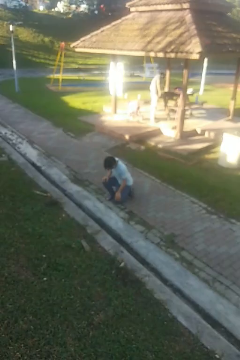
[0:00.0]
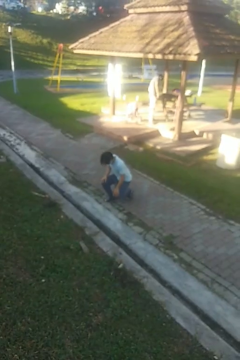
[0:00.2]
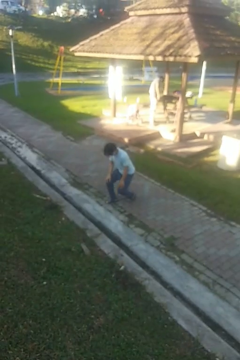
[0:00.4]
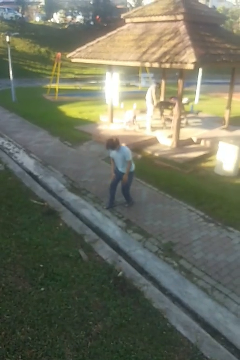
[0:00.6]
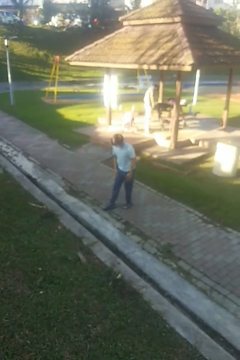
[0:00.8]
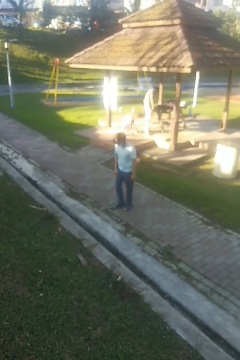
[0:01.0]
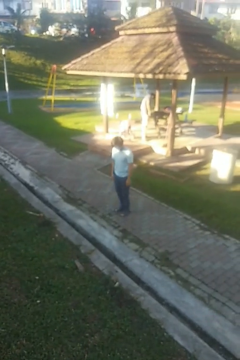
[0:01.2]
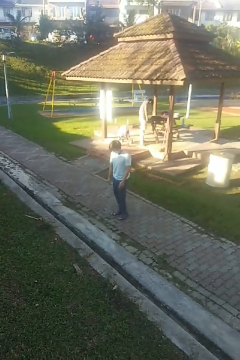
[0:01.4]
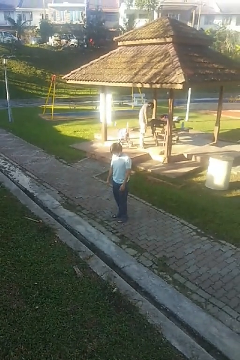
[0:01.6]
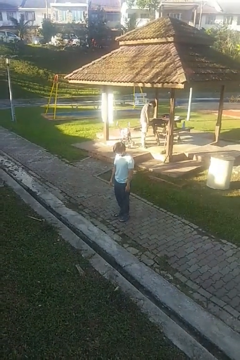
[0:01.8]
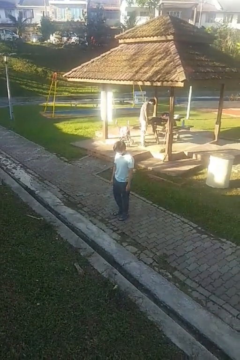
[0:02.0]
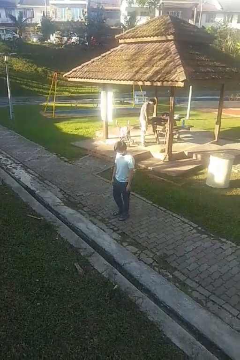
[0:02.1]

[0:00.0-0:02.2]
person stands up from floor

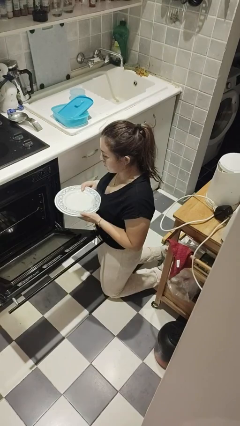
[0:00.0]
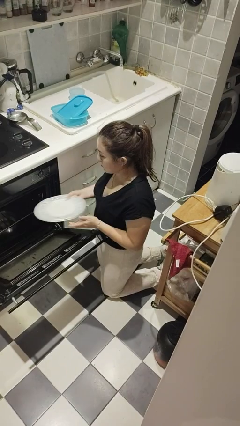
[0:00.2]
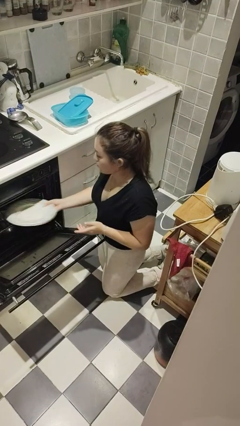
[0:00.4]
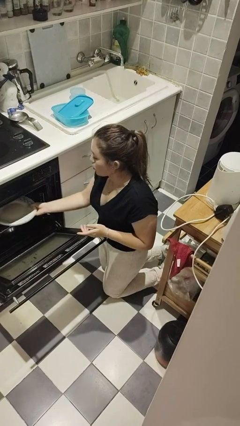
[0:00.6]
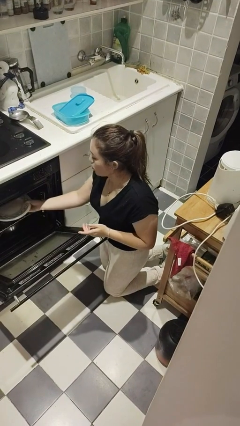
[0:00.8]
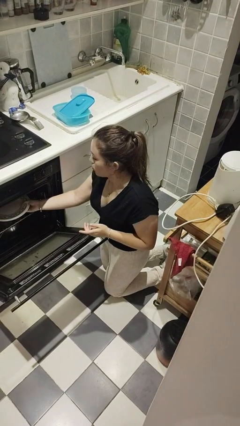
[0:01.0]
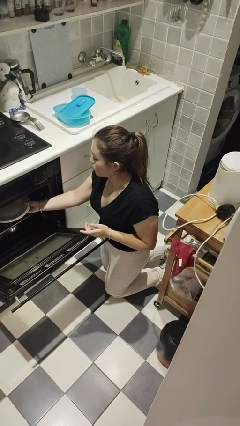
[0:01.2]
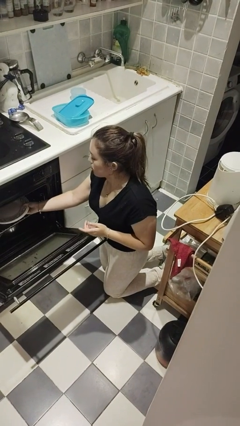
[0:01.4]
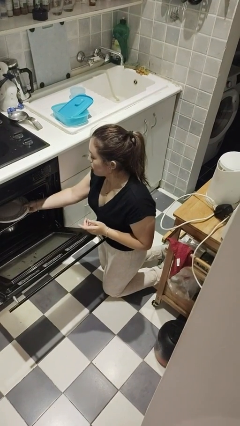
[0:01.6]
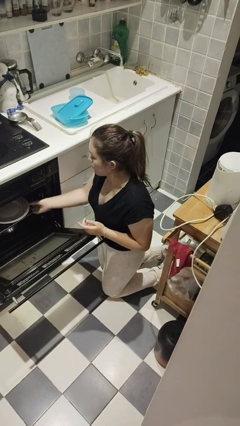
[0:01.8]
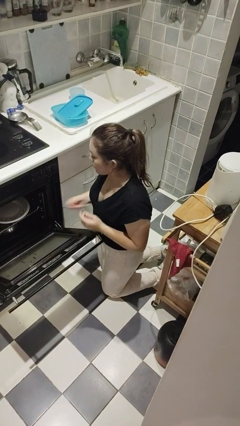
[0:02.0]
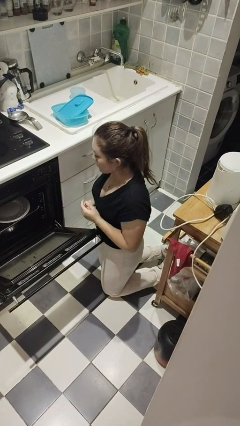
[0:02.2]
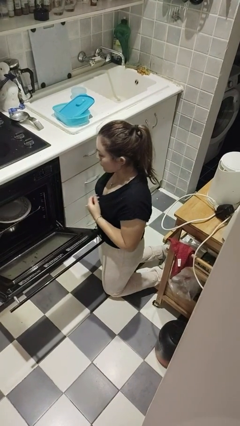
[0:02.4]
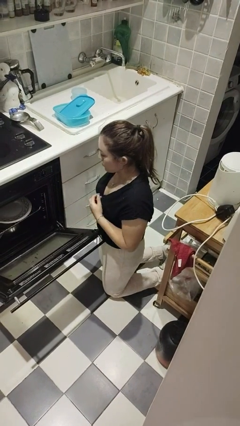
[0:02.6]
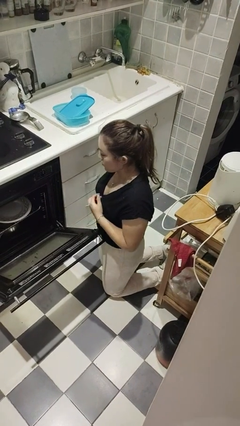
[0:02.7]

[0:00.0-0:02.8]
person loads dishwasher

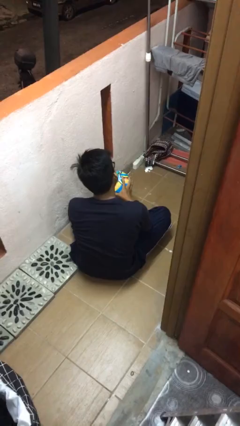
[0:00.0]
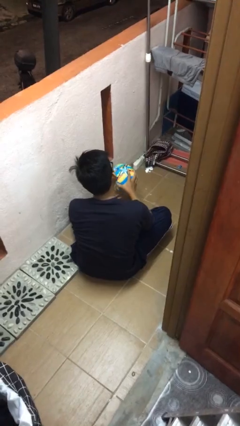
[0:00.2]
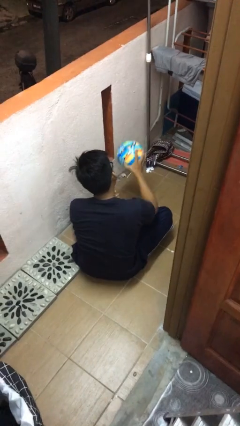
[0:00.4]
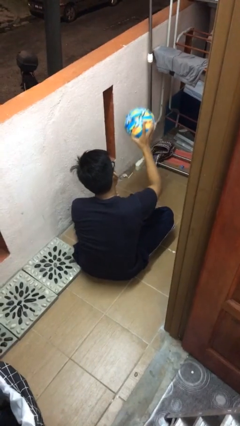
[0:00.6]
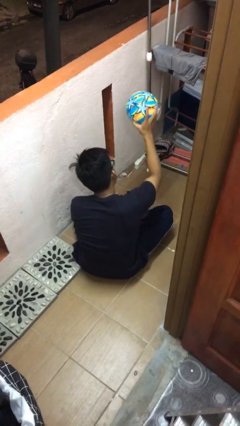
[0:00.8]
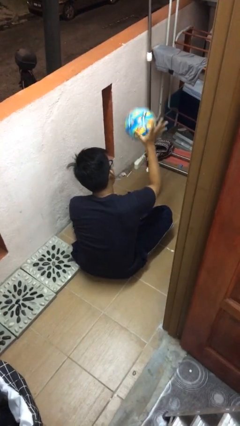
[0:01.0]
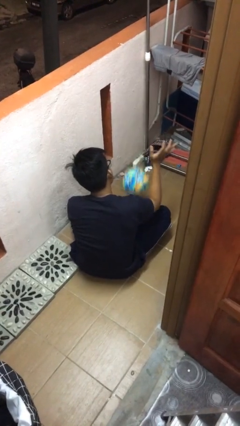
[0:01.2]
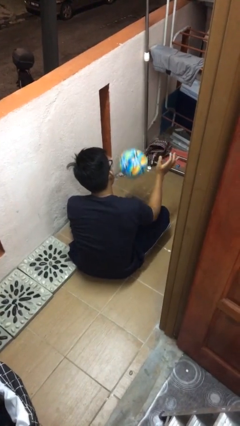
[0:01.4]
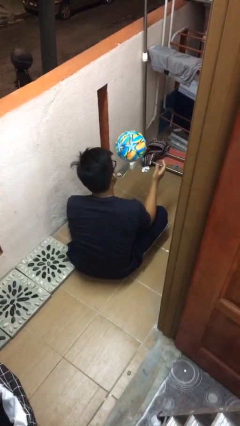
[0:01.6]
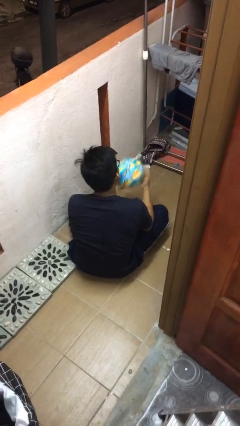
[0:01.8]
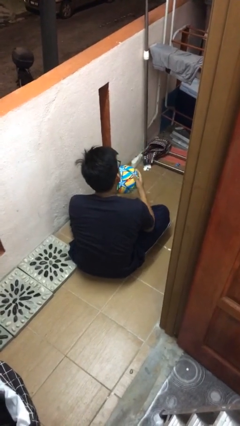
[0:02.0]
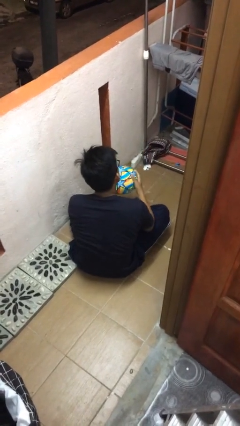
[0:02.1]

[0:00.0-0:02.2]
person bounces ball on floor

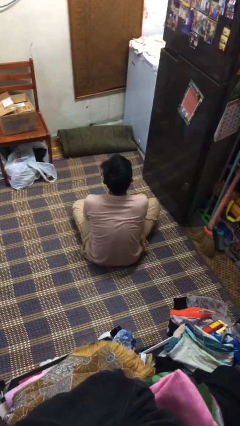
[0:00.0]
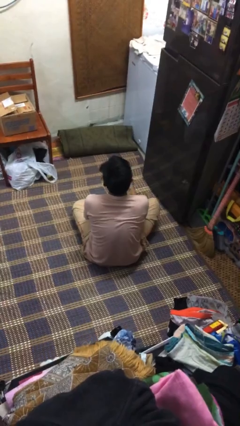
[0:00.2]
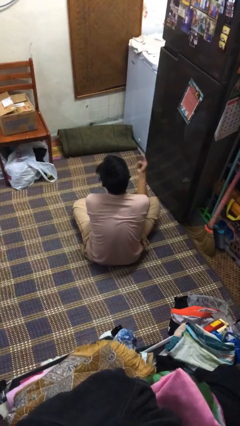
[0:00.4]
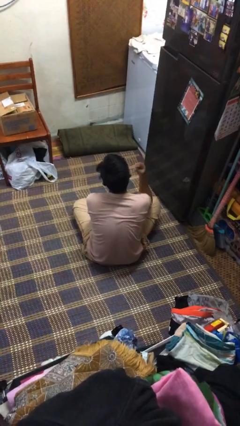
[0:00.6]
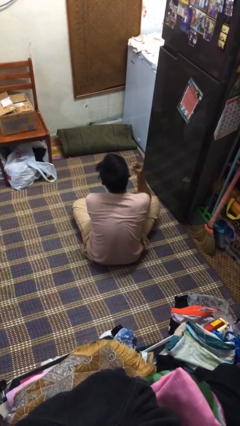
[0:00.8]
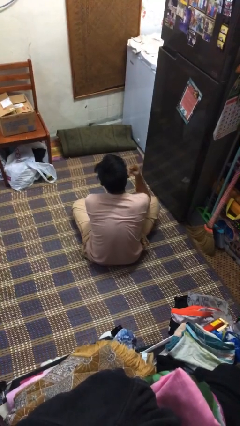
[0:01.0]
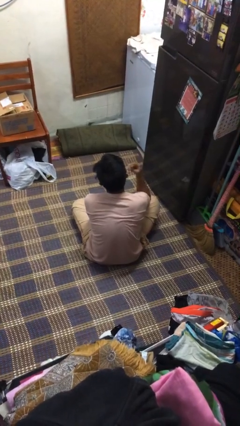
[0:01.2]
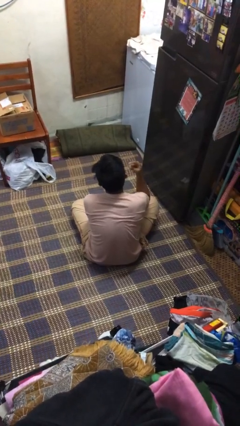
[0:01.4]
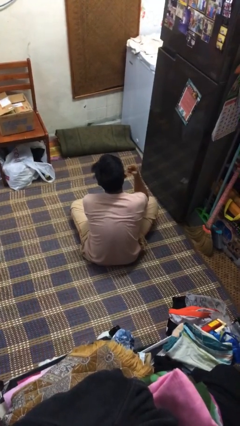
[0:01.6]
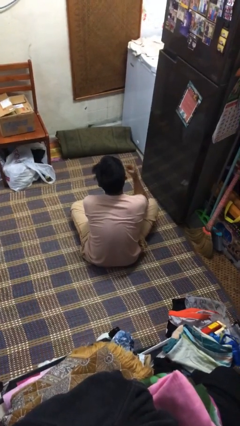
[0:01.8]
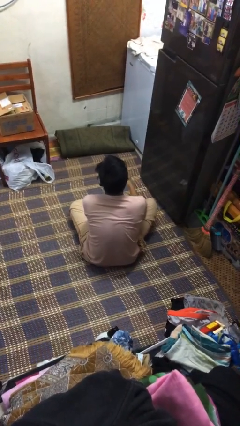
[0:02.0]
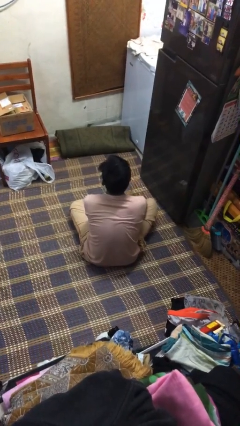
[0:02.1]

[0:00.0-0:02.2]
person gestures listen closely

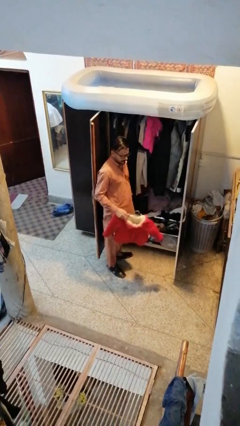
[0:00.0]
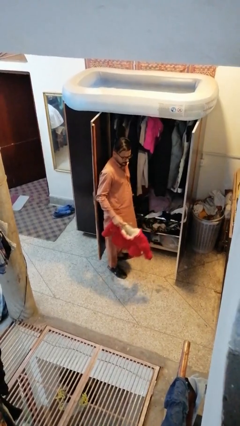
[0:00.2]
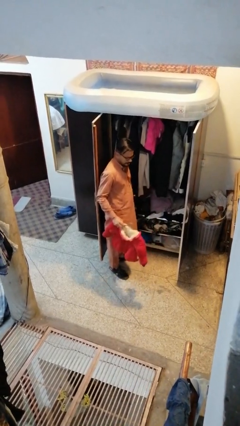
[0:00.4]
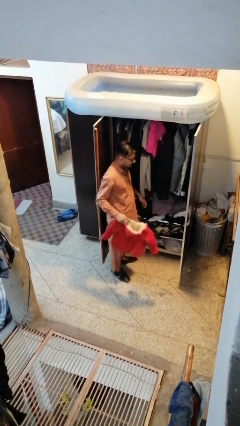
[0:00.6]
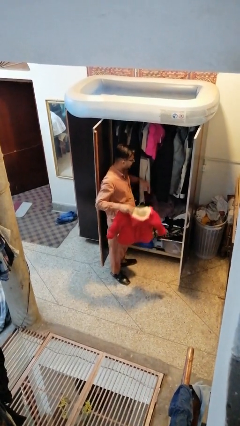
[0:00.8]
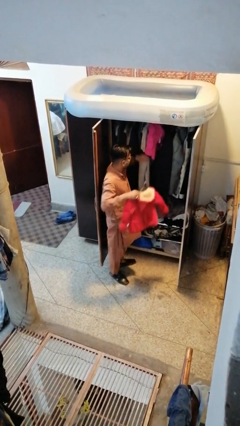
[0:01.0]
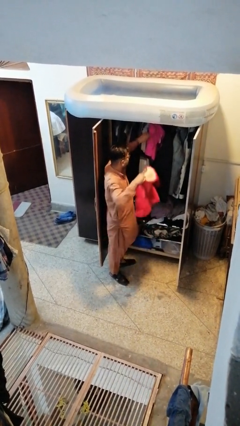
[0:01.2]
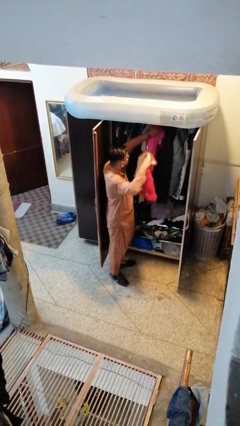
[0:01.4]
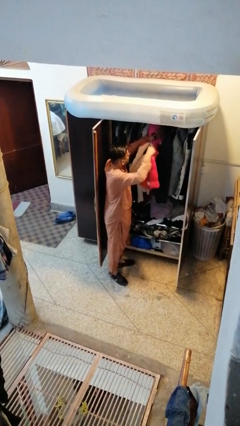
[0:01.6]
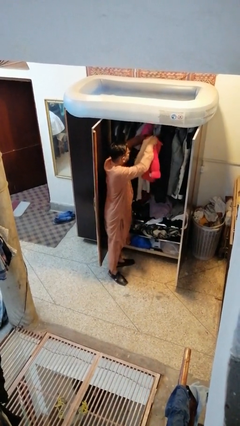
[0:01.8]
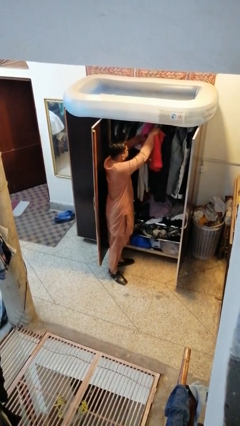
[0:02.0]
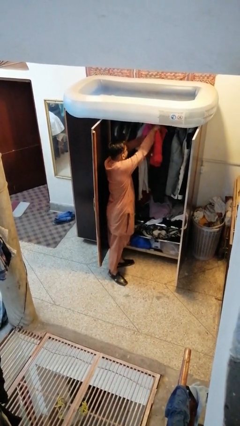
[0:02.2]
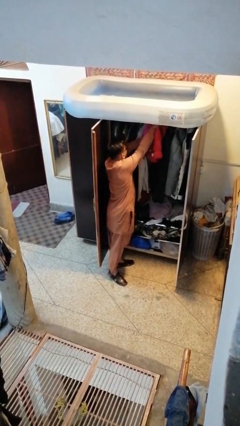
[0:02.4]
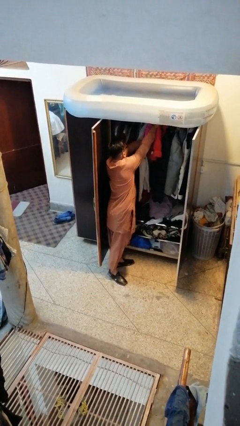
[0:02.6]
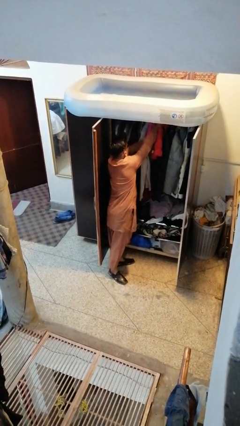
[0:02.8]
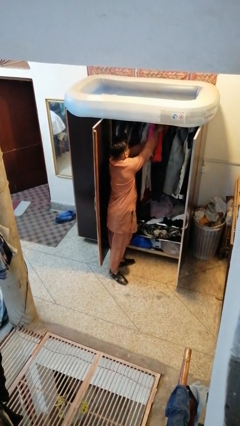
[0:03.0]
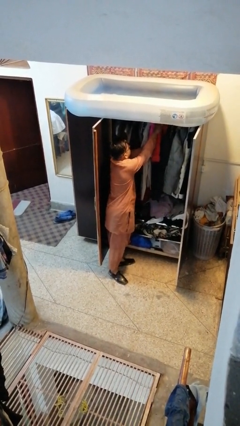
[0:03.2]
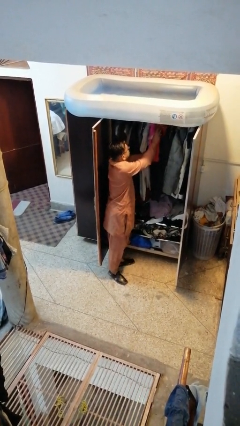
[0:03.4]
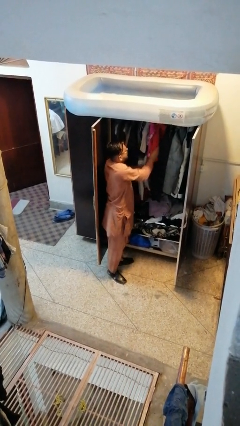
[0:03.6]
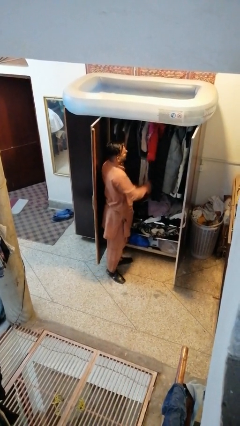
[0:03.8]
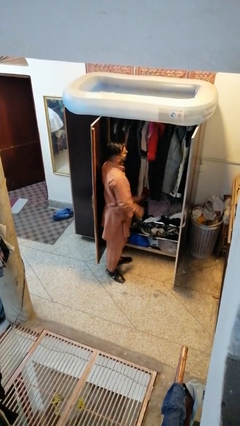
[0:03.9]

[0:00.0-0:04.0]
person puts clothes into closet

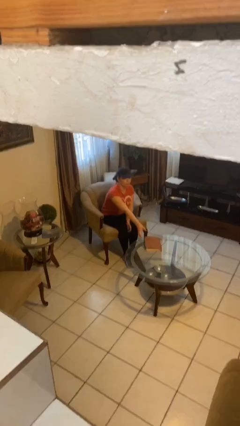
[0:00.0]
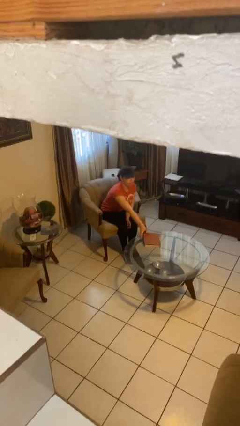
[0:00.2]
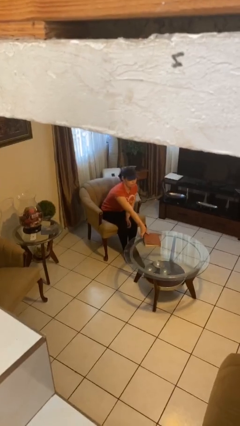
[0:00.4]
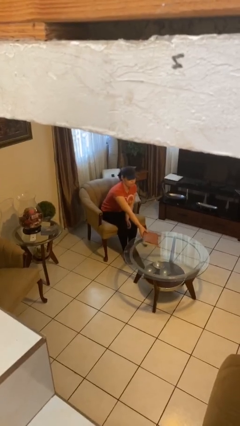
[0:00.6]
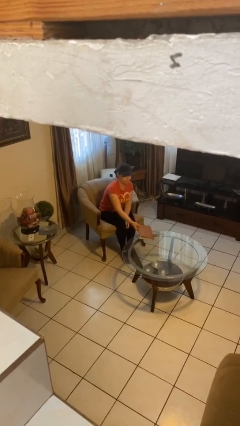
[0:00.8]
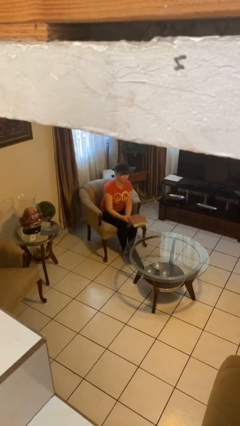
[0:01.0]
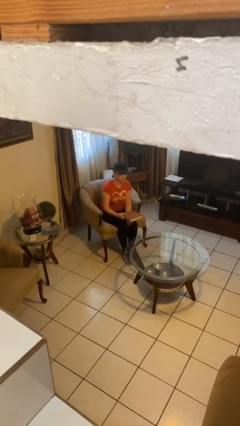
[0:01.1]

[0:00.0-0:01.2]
person picks up object from table

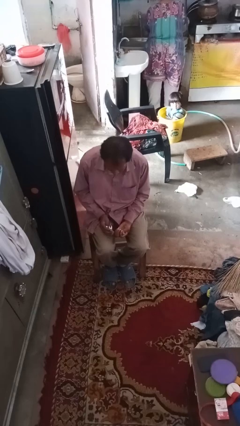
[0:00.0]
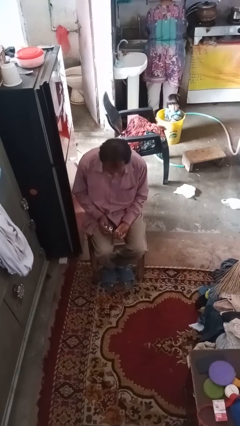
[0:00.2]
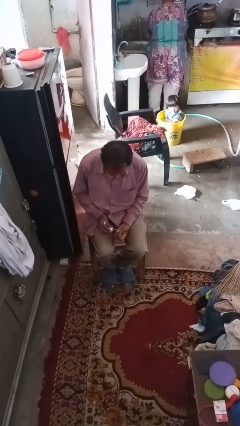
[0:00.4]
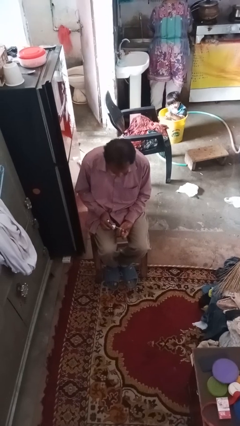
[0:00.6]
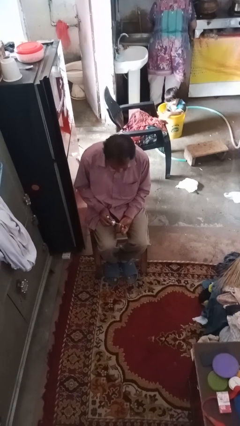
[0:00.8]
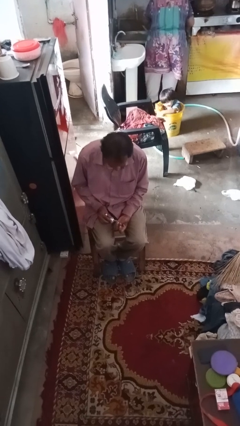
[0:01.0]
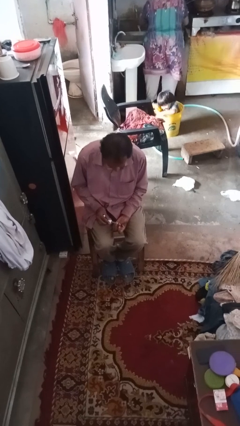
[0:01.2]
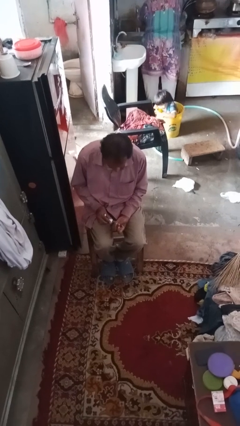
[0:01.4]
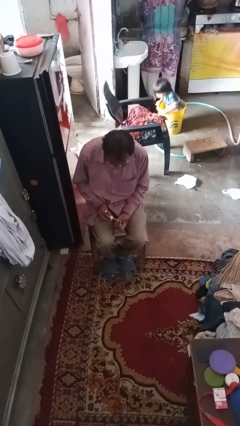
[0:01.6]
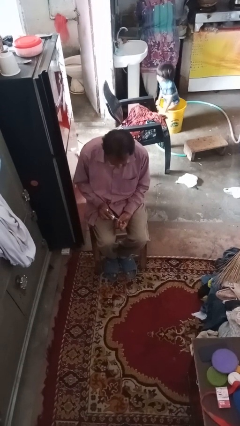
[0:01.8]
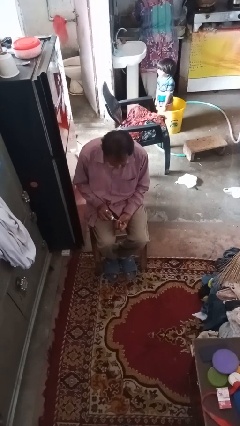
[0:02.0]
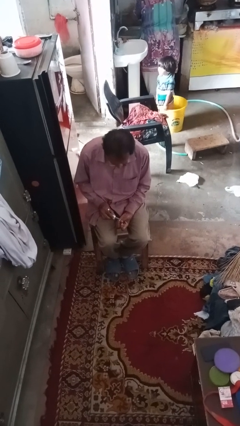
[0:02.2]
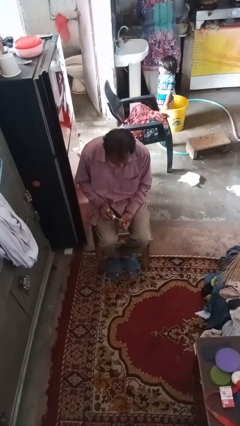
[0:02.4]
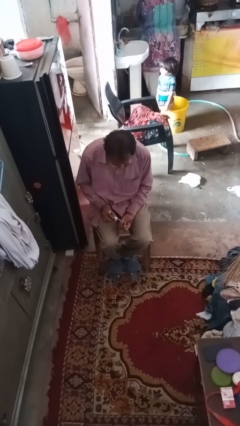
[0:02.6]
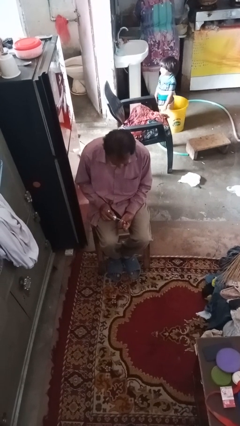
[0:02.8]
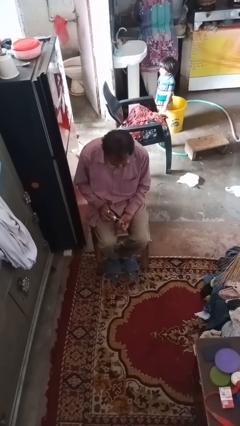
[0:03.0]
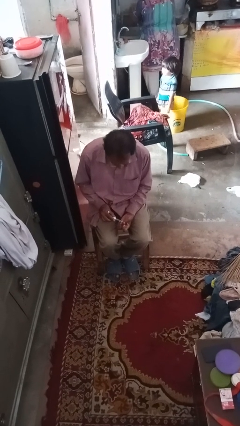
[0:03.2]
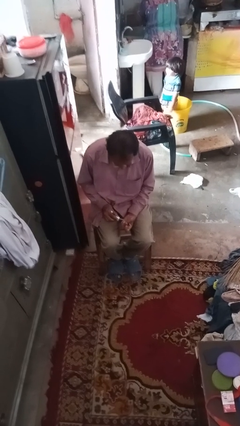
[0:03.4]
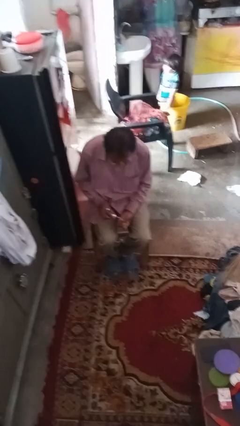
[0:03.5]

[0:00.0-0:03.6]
person paints fingernails
